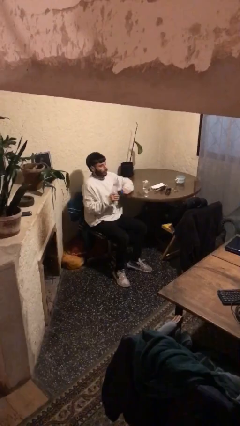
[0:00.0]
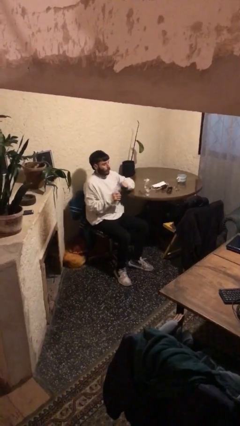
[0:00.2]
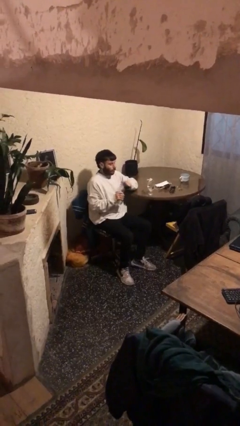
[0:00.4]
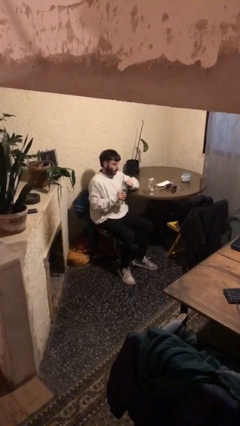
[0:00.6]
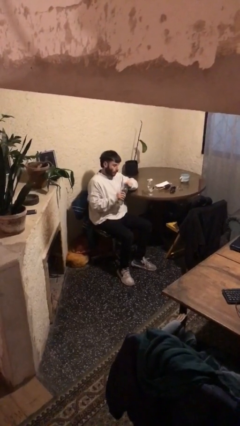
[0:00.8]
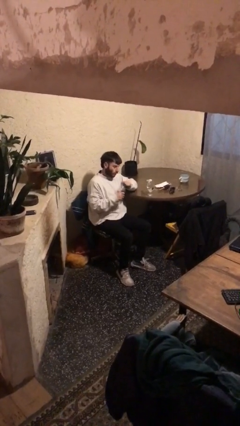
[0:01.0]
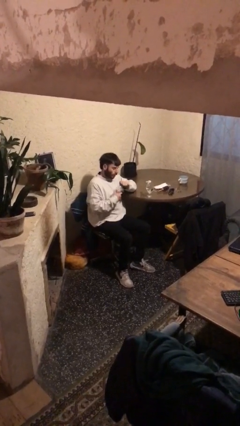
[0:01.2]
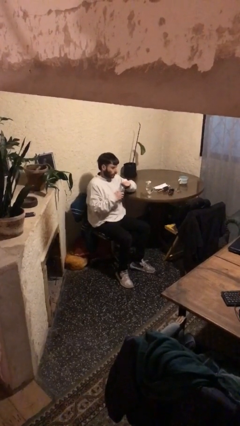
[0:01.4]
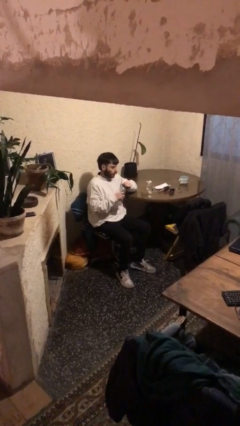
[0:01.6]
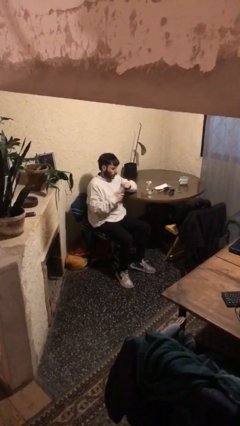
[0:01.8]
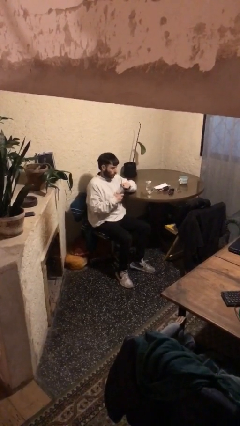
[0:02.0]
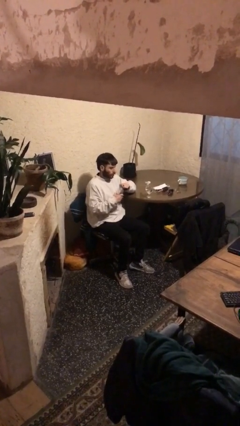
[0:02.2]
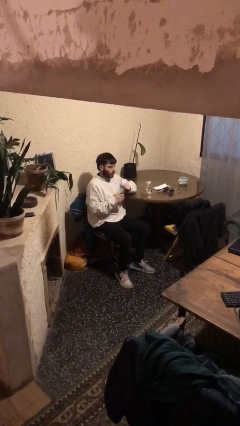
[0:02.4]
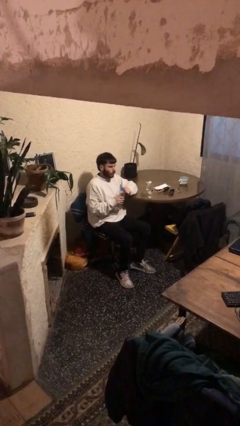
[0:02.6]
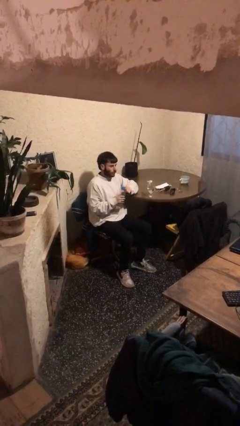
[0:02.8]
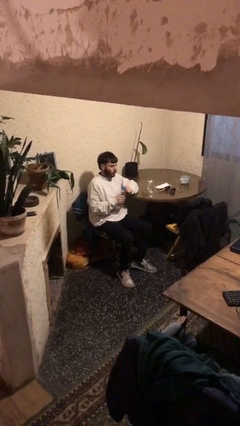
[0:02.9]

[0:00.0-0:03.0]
person screws lid to bottle

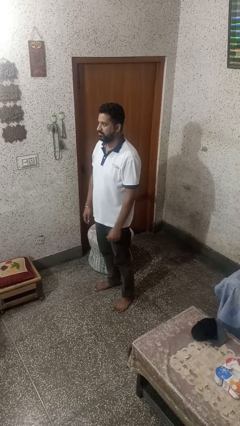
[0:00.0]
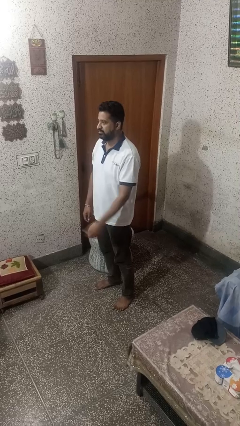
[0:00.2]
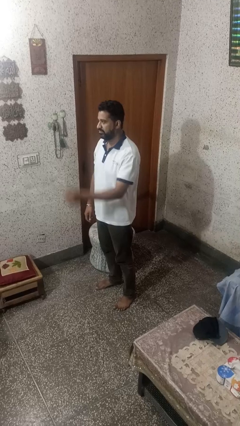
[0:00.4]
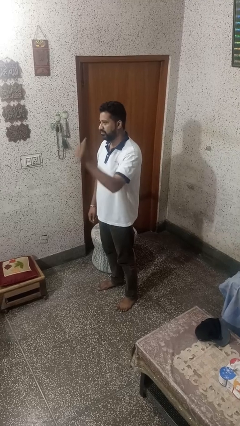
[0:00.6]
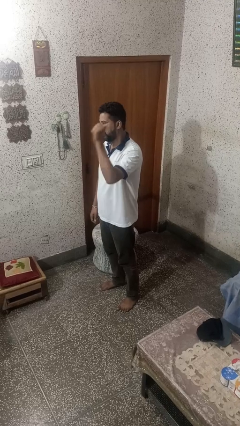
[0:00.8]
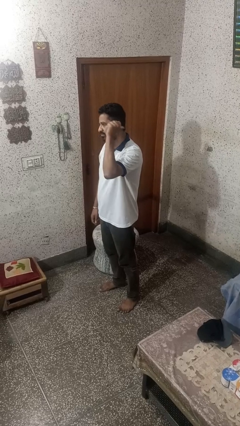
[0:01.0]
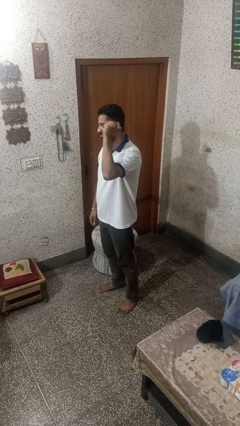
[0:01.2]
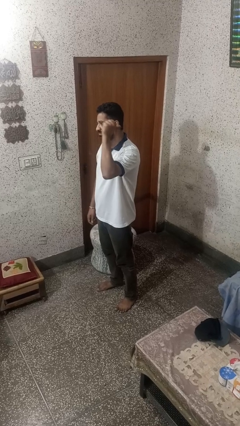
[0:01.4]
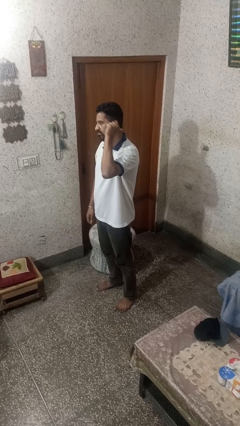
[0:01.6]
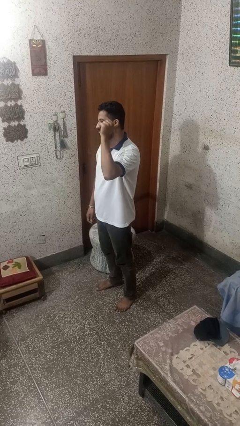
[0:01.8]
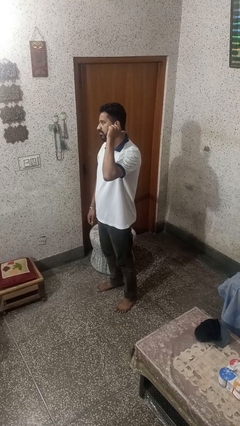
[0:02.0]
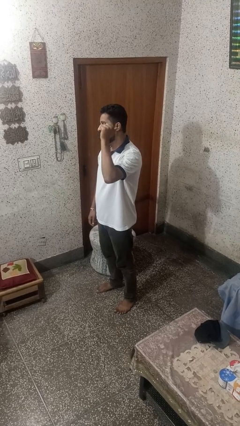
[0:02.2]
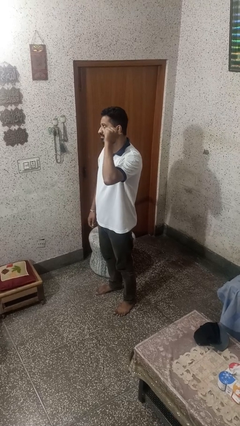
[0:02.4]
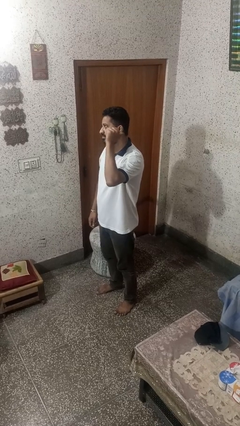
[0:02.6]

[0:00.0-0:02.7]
person gestures behind me

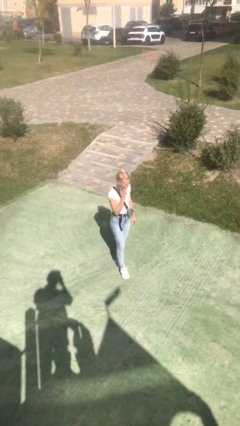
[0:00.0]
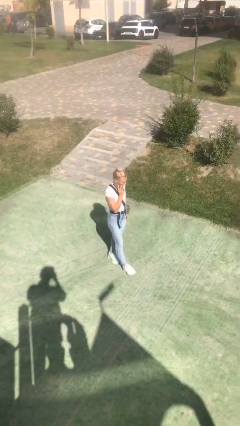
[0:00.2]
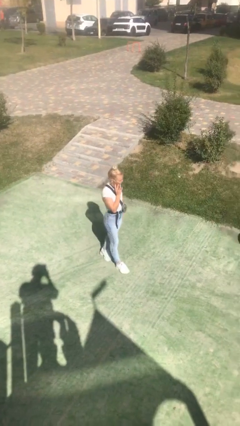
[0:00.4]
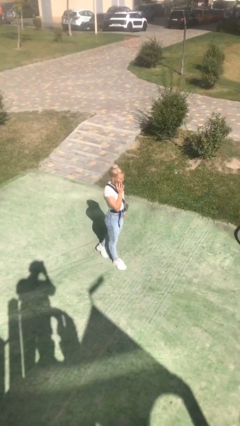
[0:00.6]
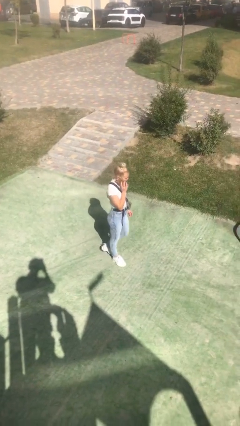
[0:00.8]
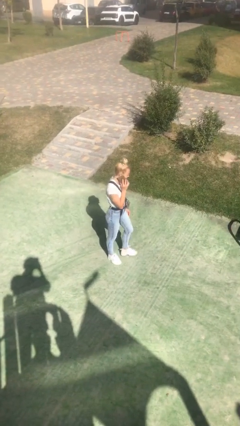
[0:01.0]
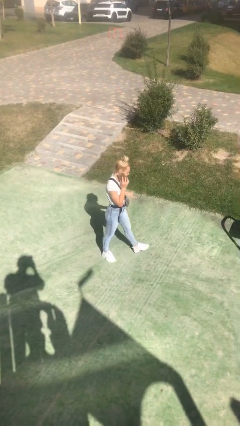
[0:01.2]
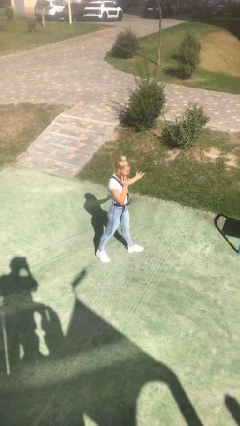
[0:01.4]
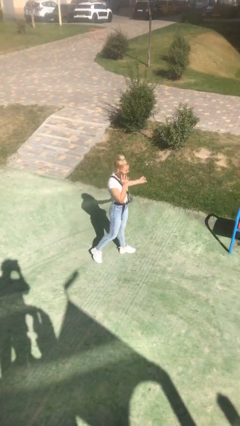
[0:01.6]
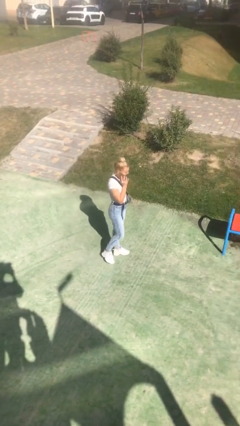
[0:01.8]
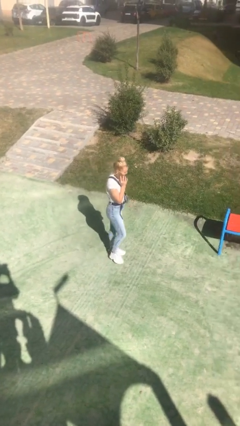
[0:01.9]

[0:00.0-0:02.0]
person talks on phone

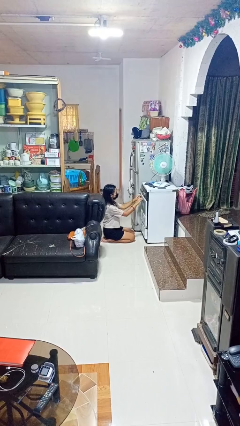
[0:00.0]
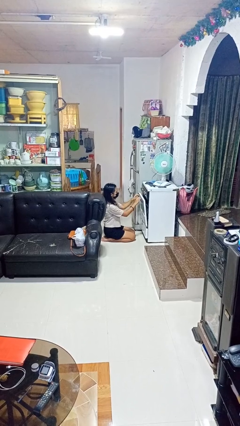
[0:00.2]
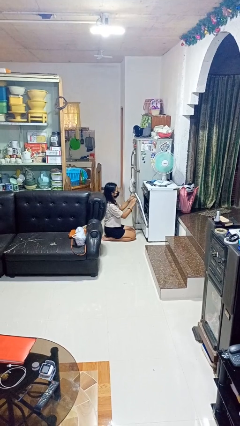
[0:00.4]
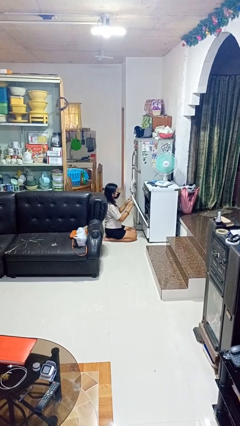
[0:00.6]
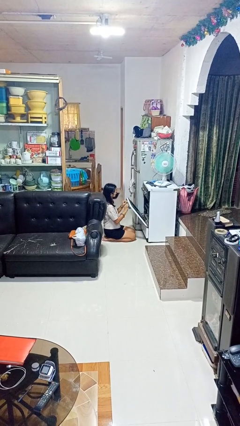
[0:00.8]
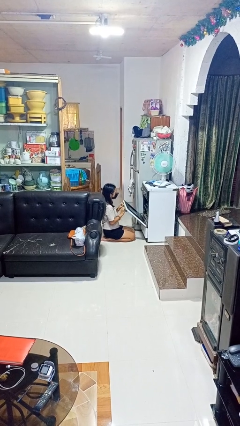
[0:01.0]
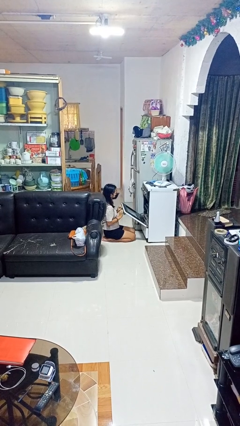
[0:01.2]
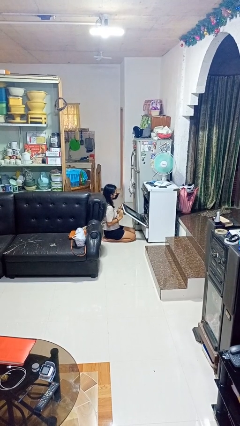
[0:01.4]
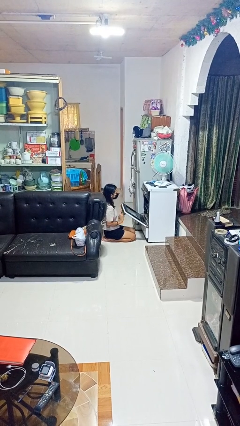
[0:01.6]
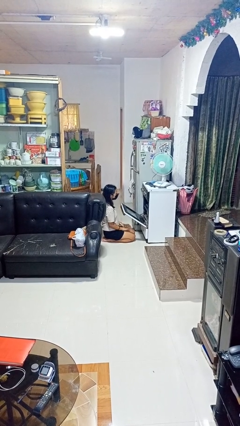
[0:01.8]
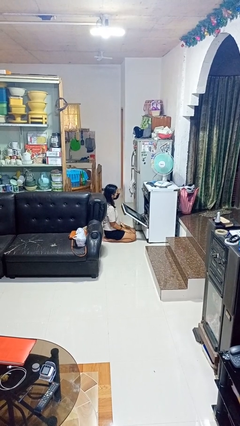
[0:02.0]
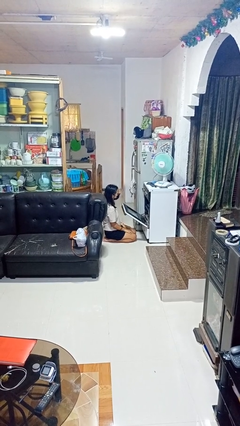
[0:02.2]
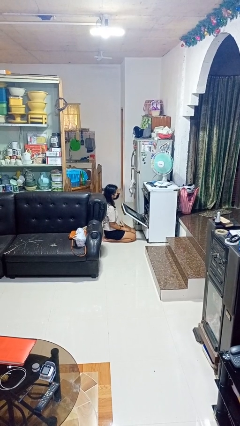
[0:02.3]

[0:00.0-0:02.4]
person opens oven door

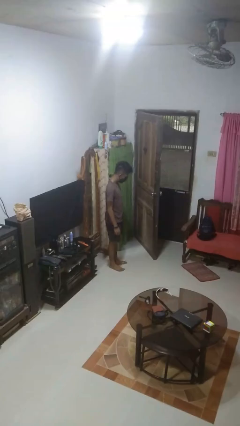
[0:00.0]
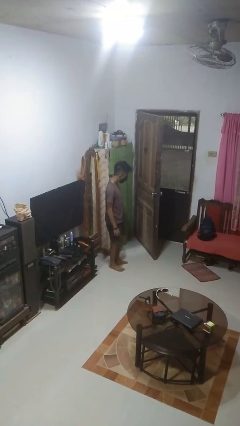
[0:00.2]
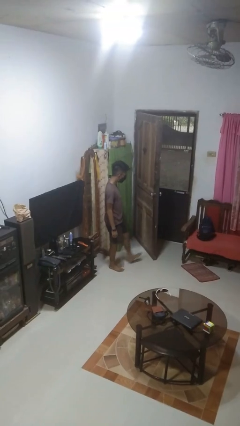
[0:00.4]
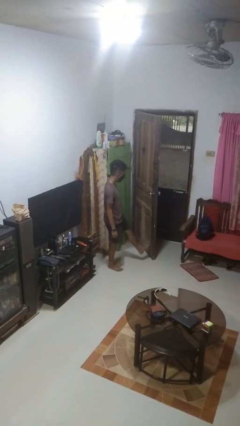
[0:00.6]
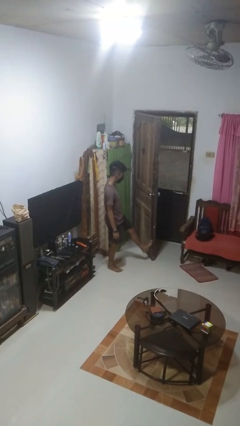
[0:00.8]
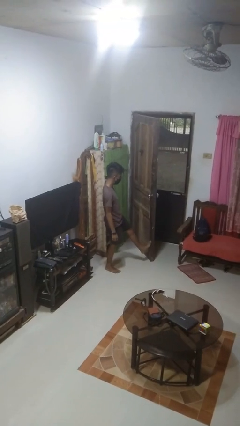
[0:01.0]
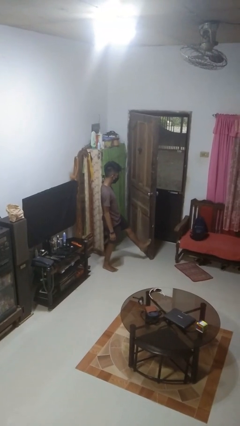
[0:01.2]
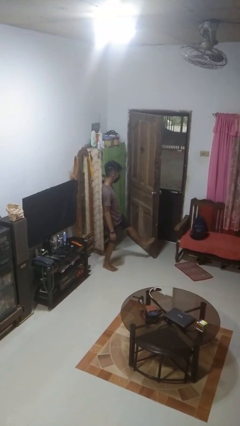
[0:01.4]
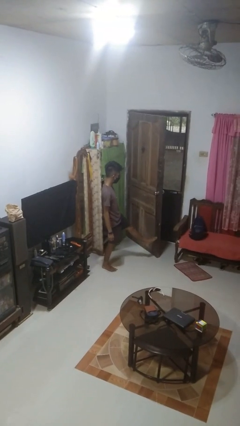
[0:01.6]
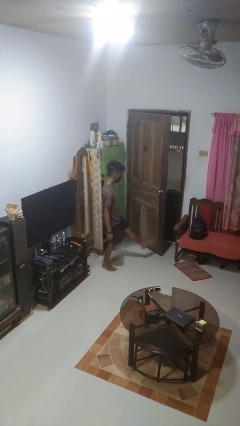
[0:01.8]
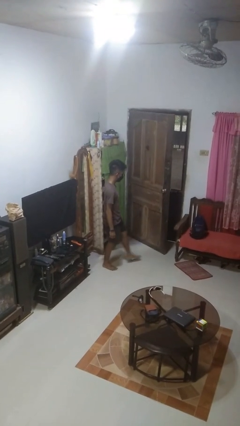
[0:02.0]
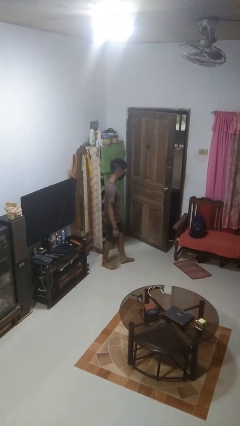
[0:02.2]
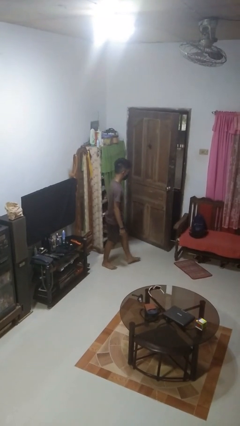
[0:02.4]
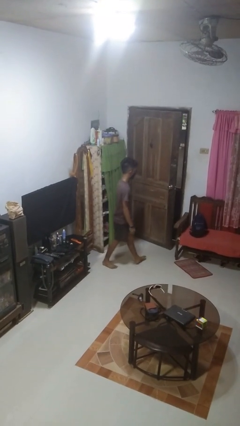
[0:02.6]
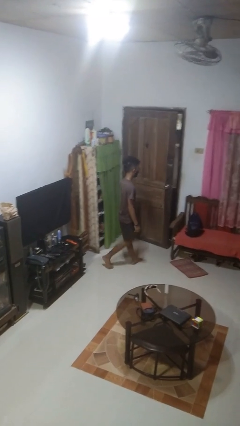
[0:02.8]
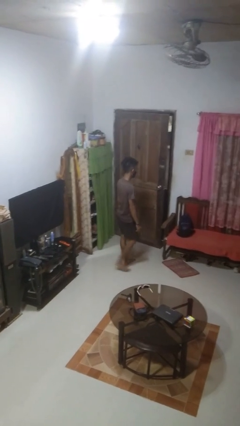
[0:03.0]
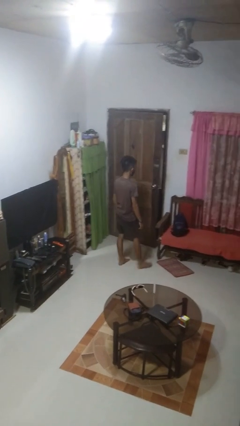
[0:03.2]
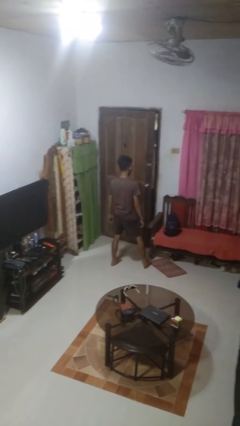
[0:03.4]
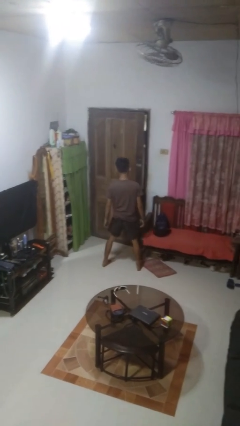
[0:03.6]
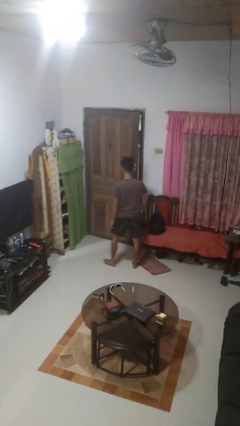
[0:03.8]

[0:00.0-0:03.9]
person closes door with foot

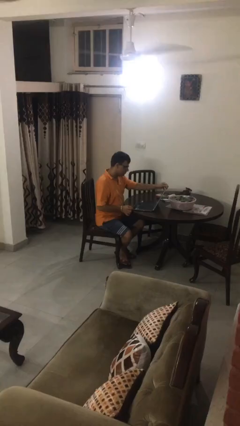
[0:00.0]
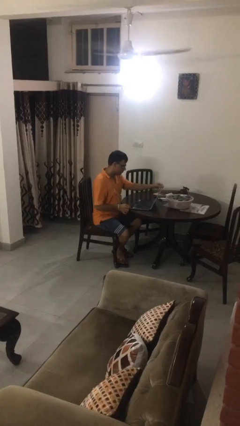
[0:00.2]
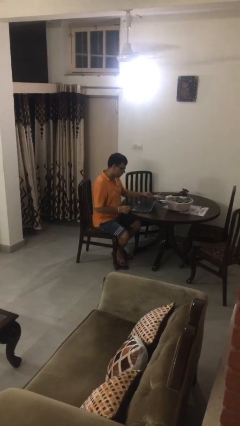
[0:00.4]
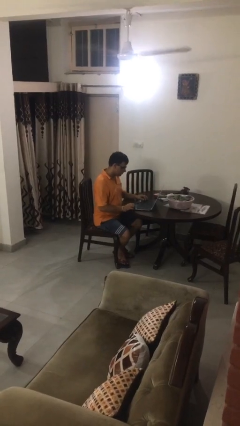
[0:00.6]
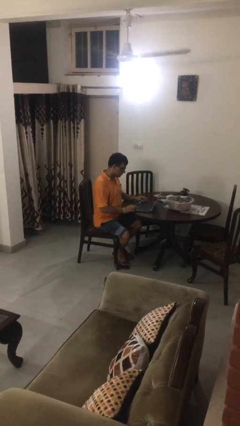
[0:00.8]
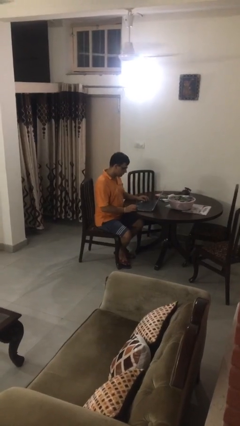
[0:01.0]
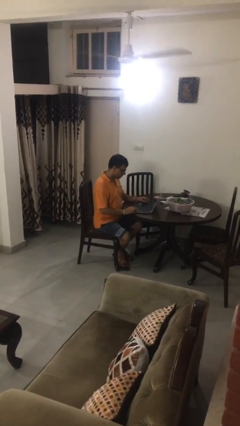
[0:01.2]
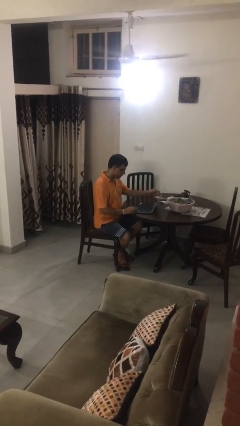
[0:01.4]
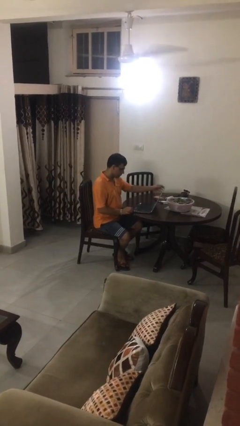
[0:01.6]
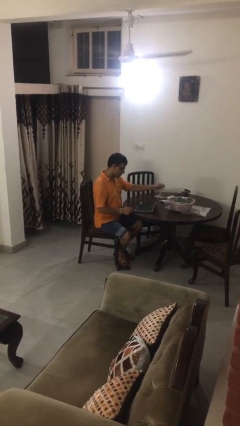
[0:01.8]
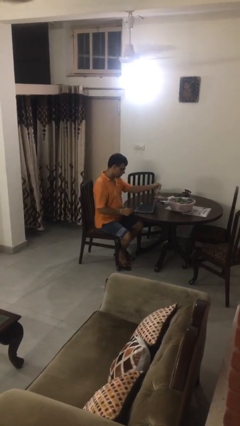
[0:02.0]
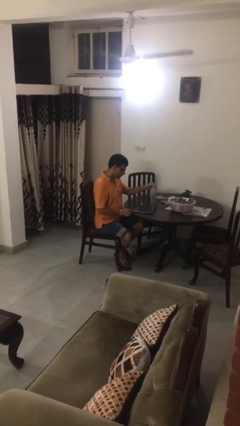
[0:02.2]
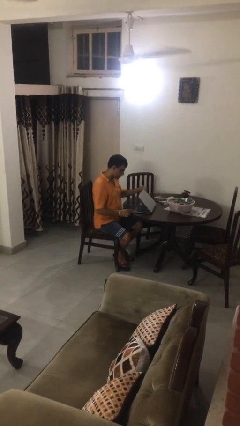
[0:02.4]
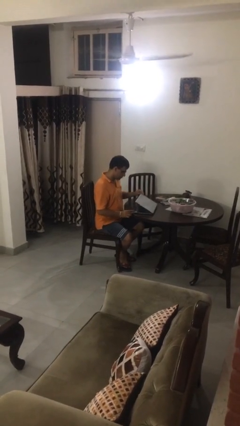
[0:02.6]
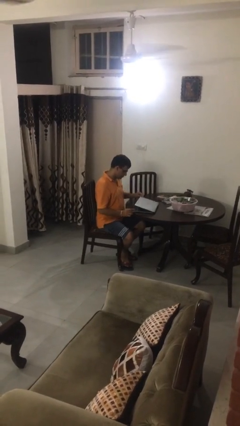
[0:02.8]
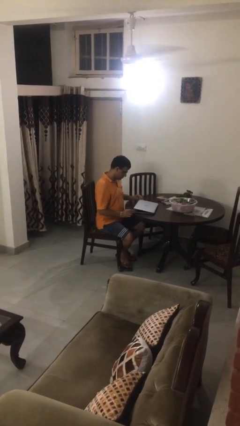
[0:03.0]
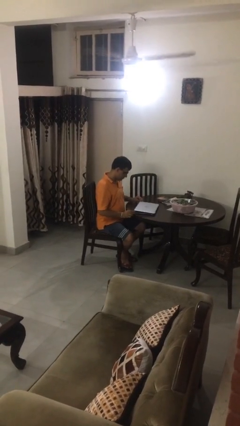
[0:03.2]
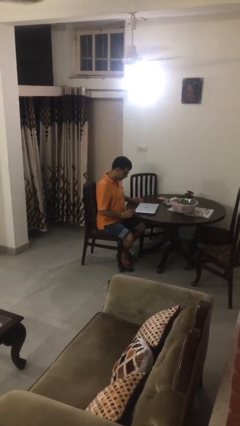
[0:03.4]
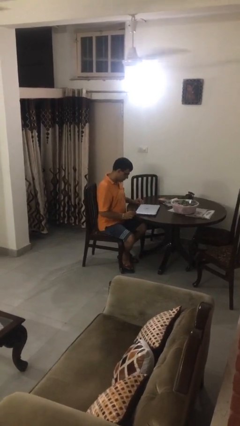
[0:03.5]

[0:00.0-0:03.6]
person closes laptop

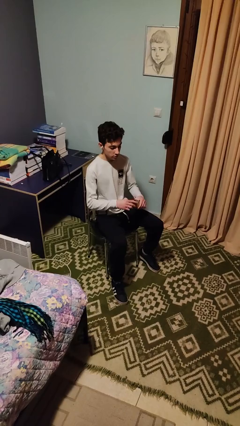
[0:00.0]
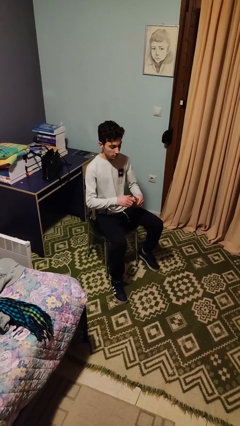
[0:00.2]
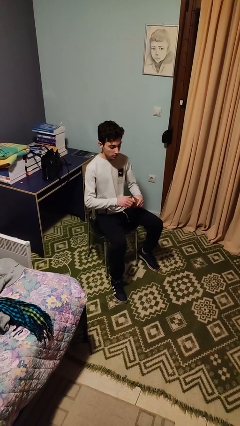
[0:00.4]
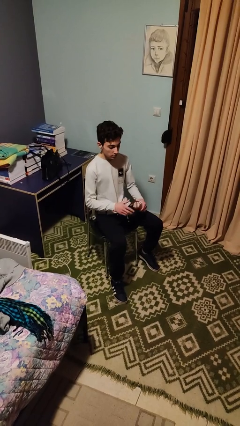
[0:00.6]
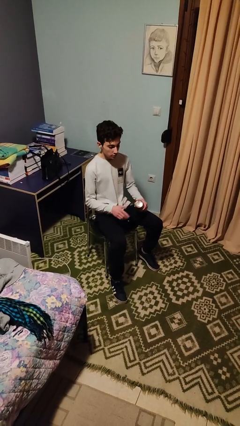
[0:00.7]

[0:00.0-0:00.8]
person closes jar
